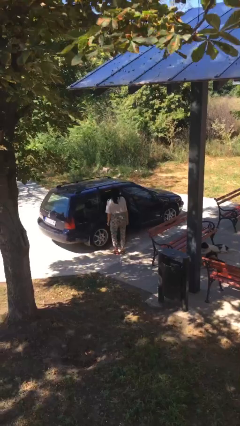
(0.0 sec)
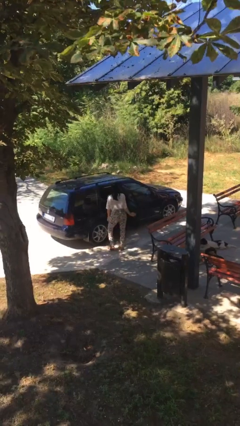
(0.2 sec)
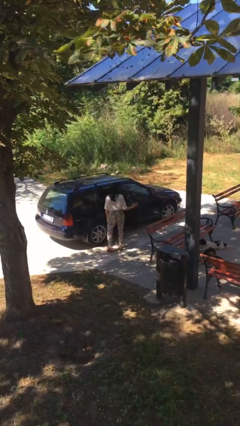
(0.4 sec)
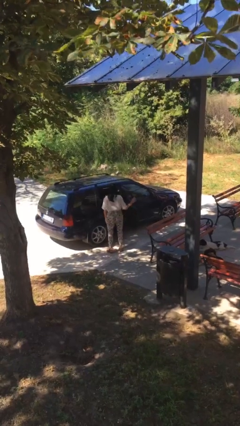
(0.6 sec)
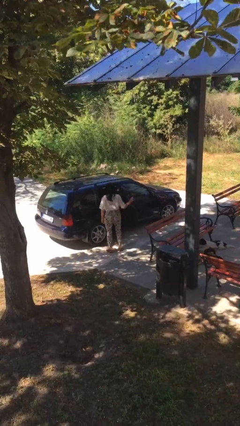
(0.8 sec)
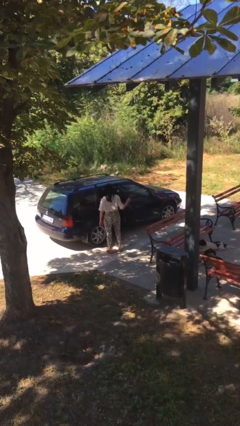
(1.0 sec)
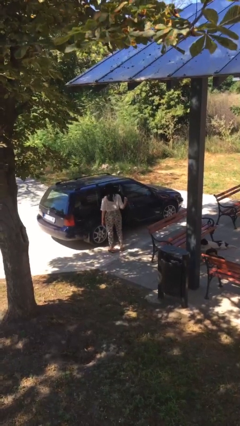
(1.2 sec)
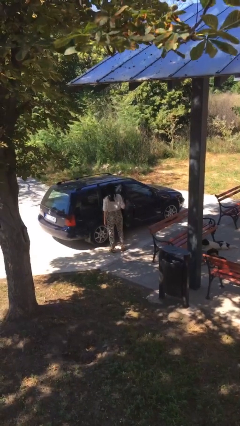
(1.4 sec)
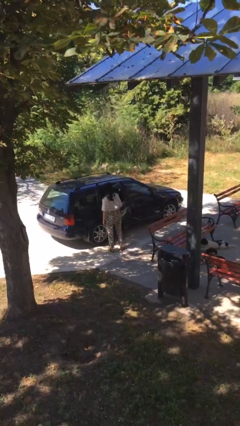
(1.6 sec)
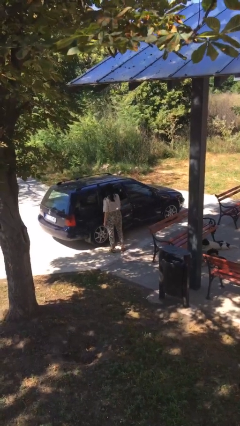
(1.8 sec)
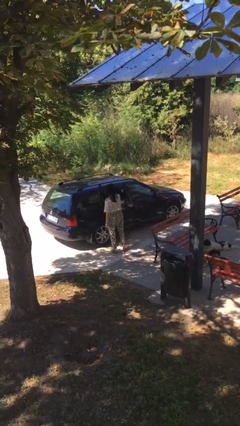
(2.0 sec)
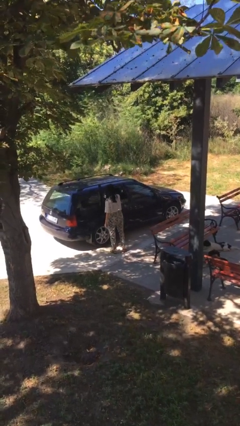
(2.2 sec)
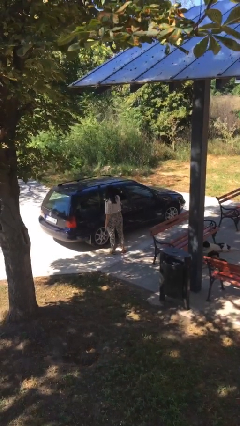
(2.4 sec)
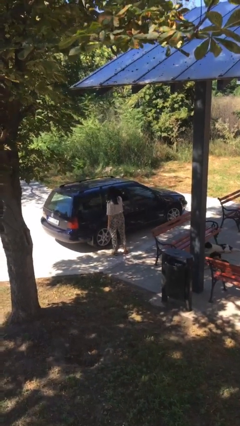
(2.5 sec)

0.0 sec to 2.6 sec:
person closes car door

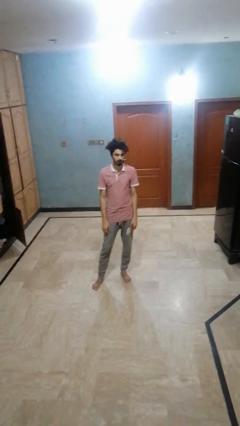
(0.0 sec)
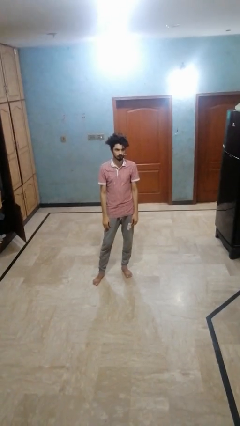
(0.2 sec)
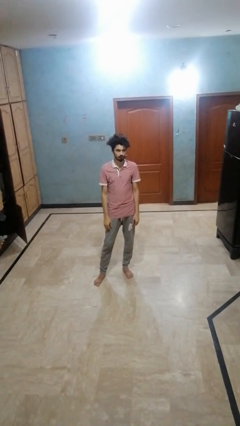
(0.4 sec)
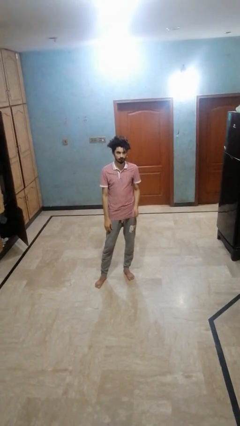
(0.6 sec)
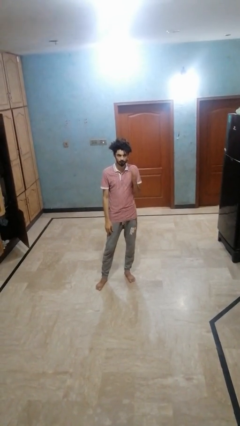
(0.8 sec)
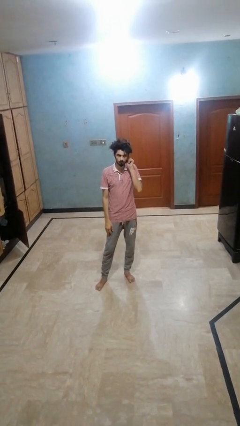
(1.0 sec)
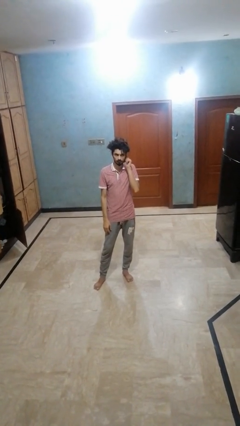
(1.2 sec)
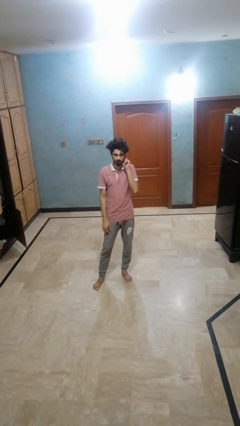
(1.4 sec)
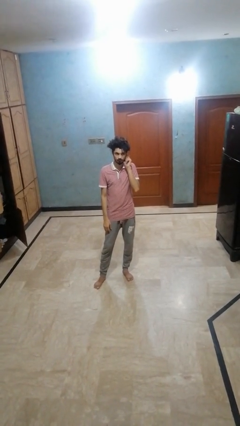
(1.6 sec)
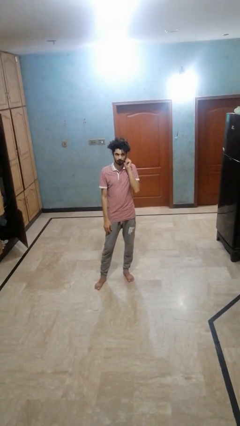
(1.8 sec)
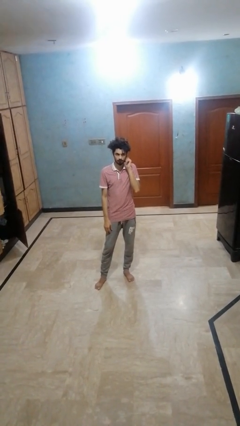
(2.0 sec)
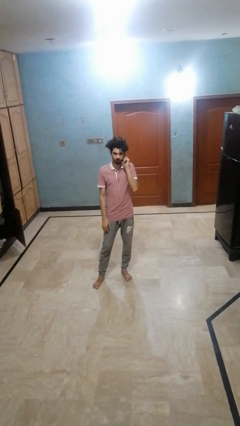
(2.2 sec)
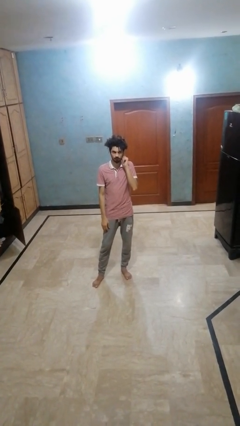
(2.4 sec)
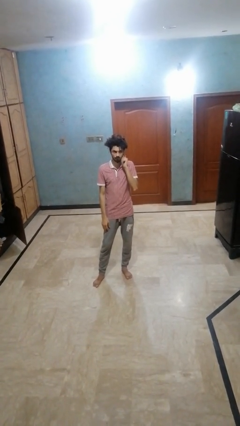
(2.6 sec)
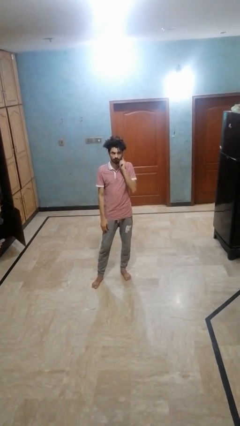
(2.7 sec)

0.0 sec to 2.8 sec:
person touches earlobe

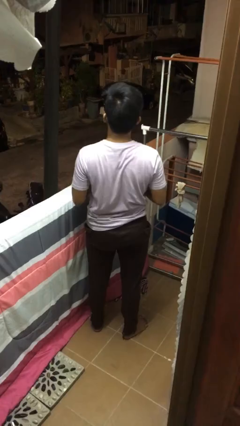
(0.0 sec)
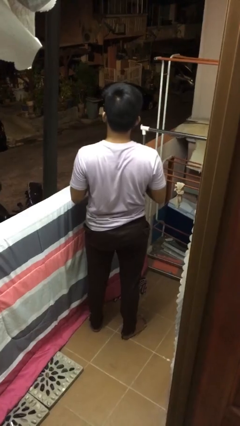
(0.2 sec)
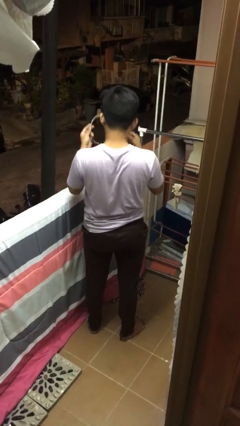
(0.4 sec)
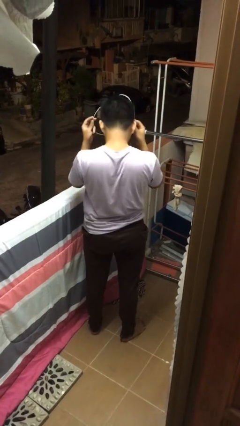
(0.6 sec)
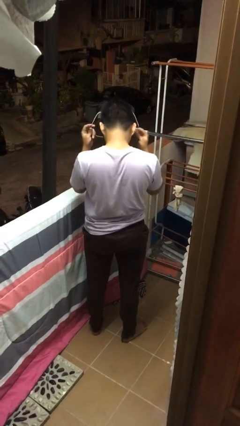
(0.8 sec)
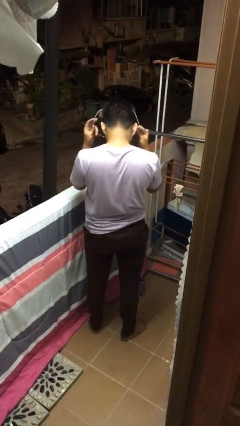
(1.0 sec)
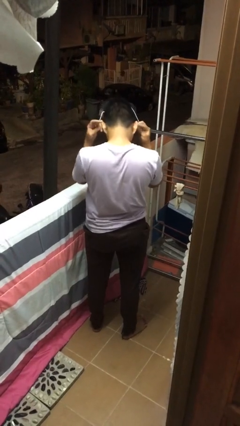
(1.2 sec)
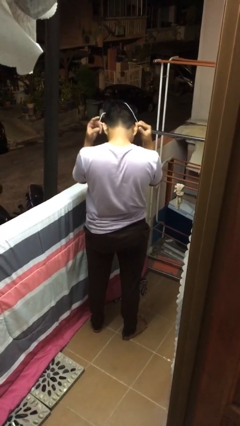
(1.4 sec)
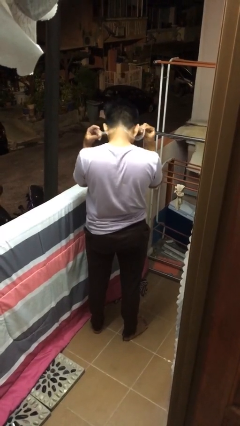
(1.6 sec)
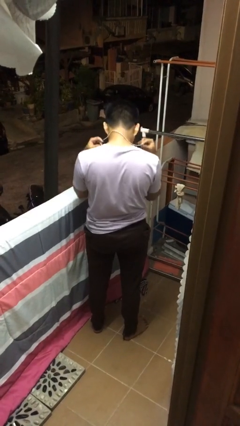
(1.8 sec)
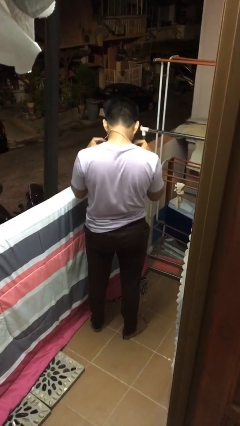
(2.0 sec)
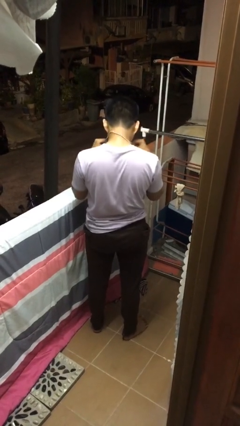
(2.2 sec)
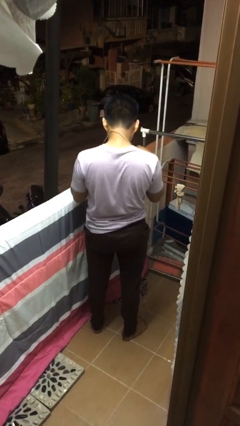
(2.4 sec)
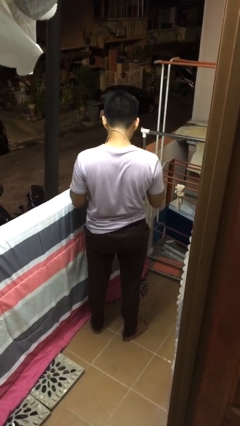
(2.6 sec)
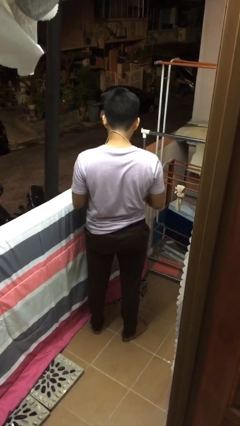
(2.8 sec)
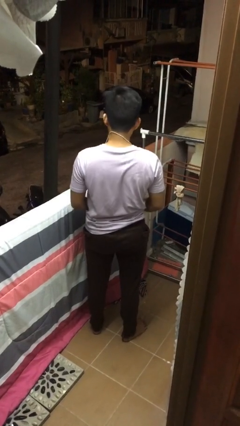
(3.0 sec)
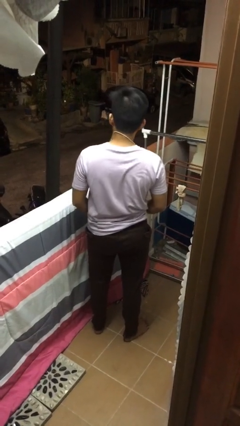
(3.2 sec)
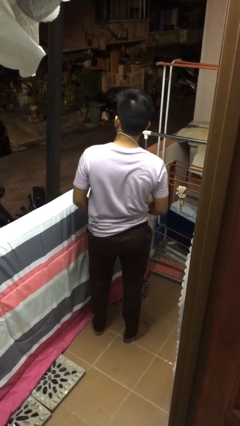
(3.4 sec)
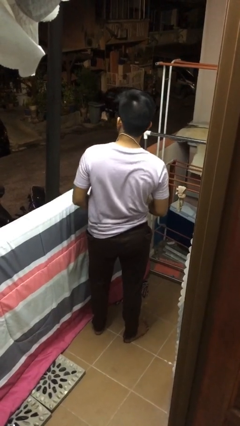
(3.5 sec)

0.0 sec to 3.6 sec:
person puts on necklace

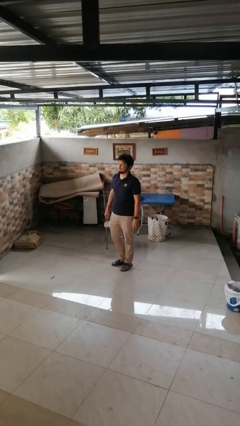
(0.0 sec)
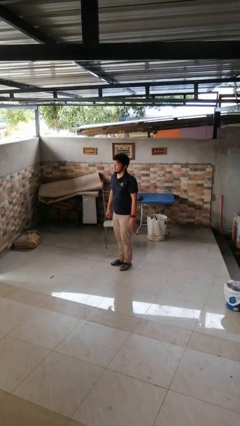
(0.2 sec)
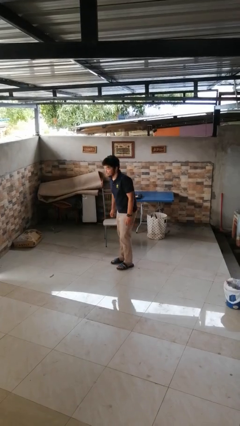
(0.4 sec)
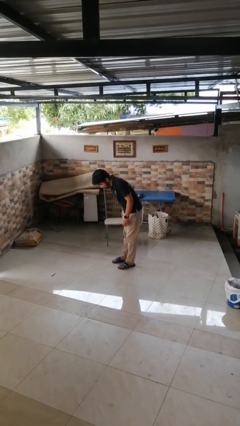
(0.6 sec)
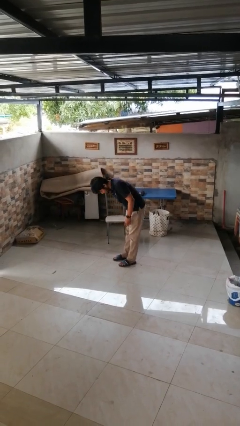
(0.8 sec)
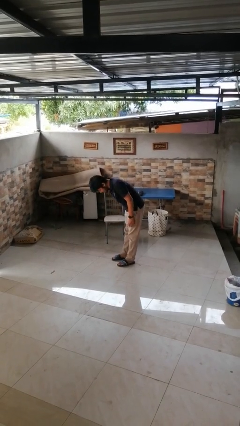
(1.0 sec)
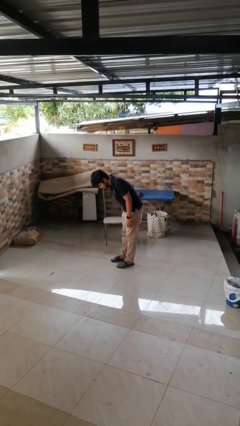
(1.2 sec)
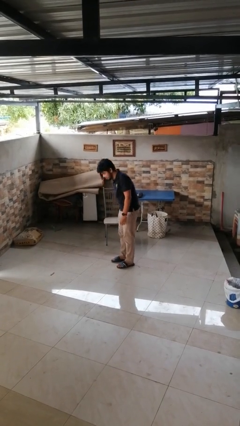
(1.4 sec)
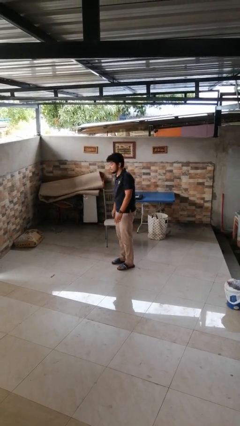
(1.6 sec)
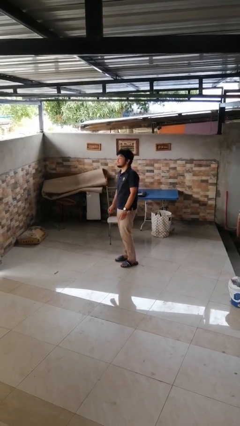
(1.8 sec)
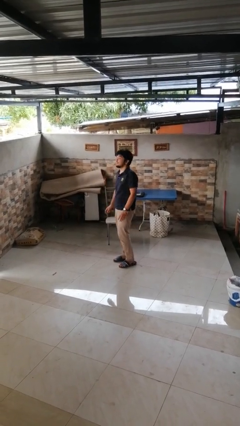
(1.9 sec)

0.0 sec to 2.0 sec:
person bows

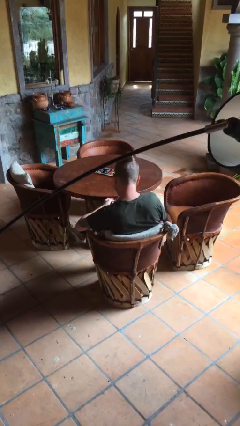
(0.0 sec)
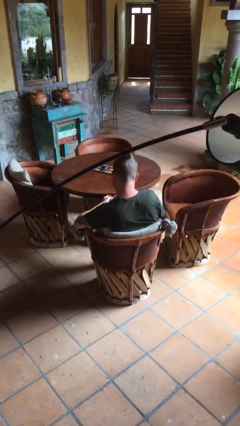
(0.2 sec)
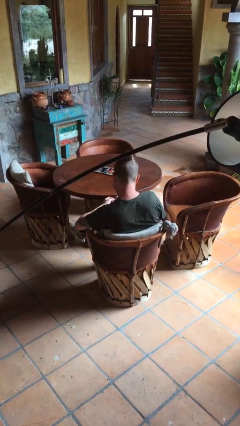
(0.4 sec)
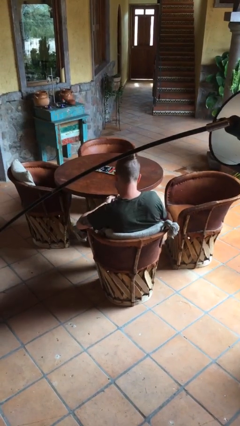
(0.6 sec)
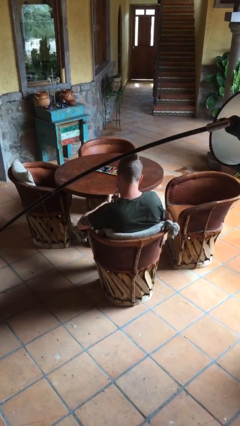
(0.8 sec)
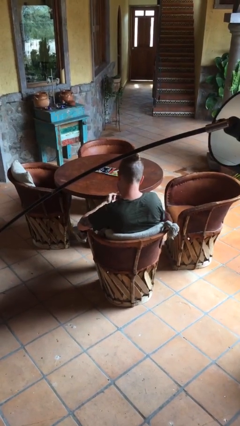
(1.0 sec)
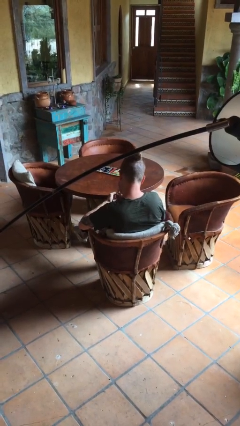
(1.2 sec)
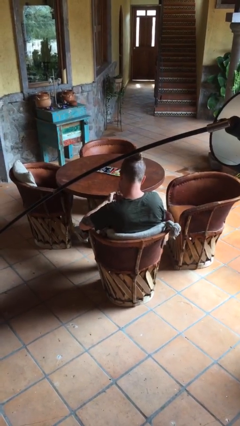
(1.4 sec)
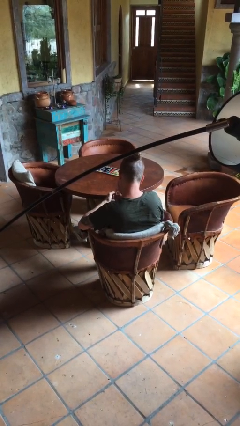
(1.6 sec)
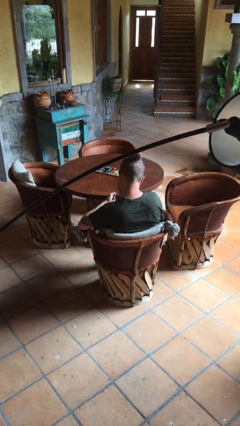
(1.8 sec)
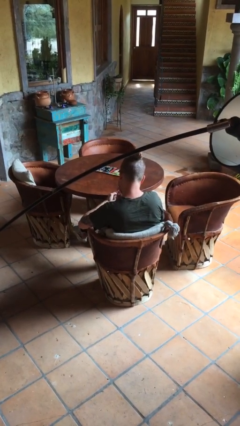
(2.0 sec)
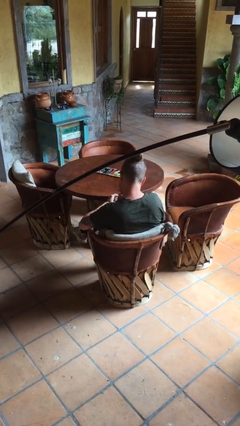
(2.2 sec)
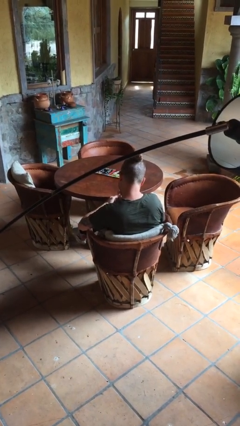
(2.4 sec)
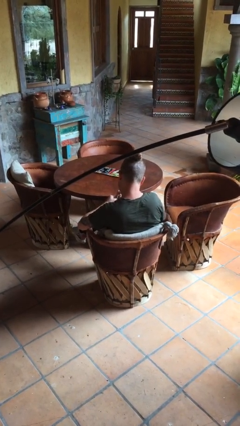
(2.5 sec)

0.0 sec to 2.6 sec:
person files fingernails

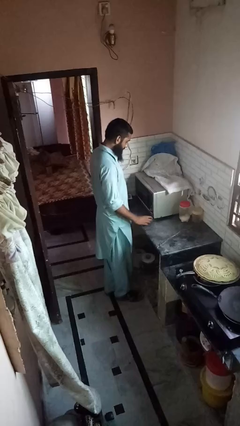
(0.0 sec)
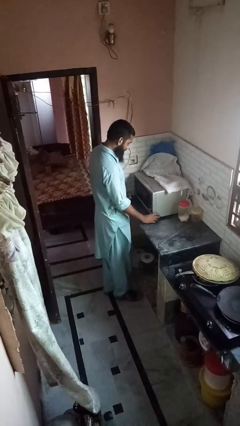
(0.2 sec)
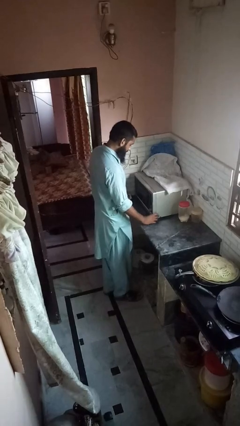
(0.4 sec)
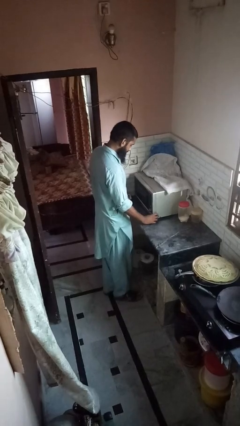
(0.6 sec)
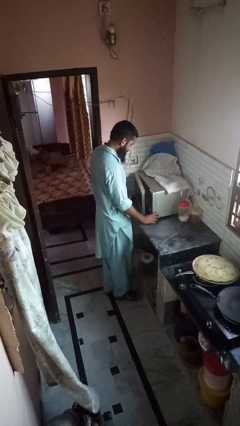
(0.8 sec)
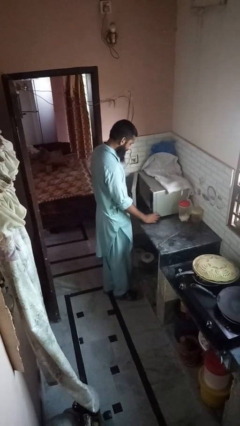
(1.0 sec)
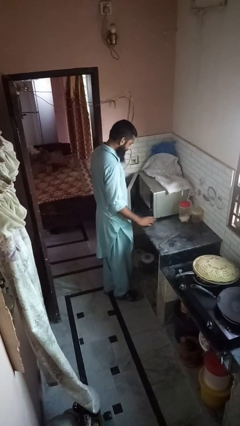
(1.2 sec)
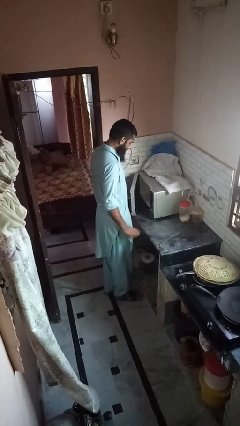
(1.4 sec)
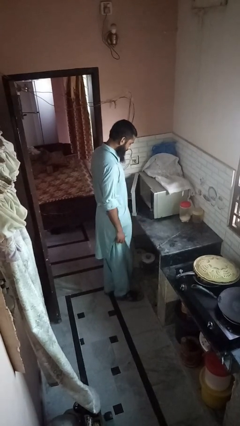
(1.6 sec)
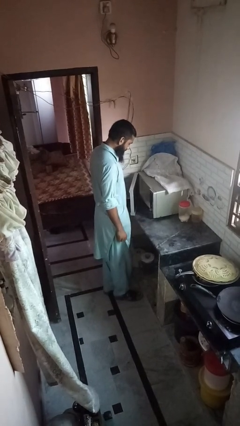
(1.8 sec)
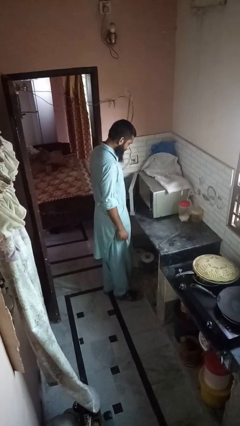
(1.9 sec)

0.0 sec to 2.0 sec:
person opens microwave

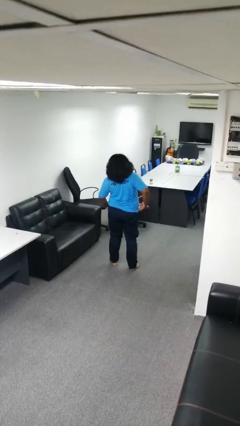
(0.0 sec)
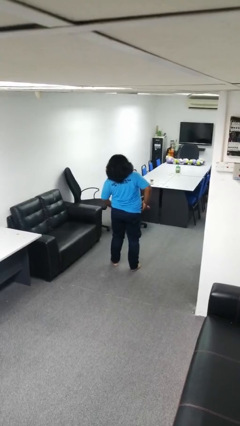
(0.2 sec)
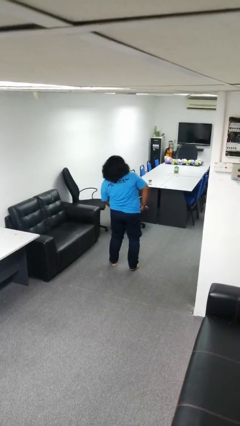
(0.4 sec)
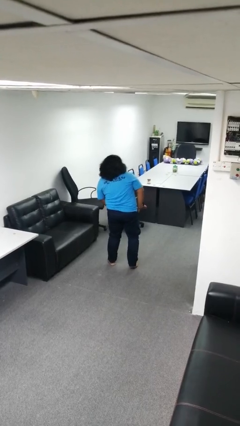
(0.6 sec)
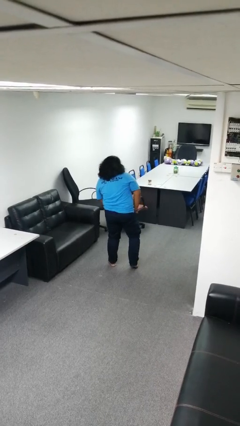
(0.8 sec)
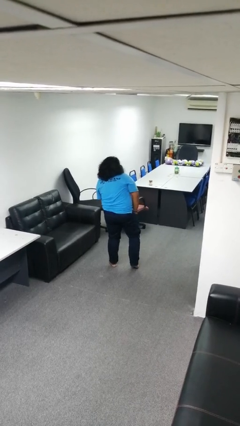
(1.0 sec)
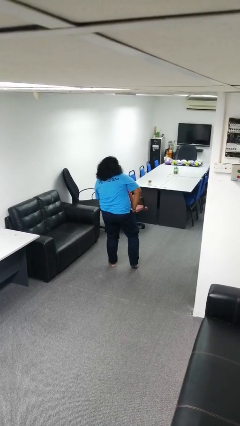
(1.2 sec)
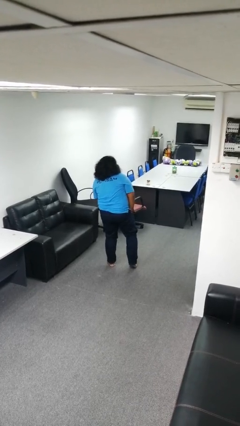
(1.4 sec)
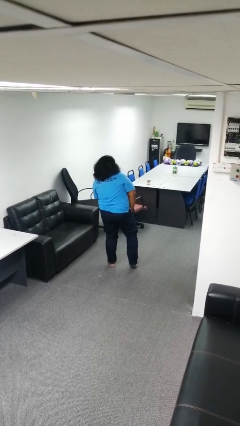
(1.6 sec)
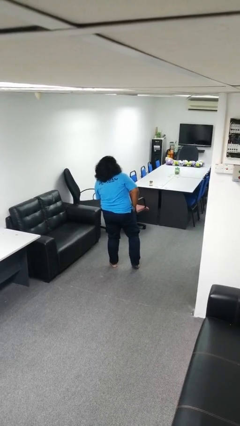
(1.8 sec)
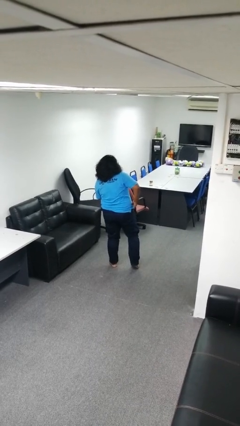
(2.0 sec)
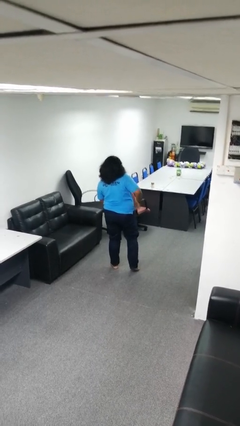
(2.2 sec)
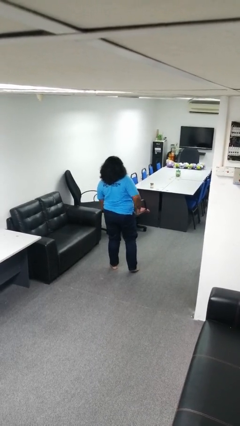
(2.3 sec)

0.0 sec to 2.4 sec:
person puts hands in back pockets
